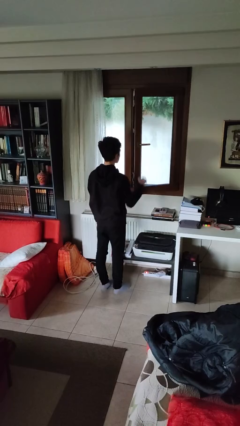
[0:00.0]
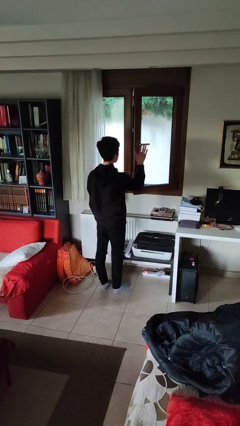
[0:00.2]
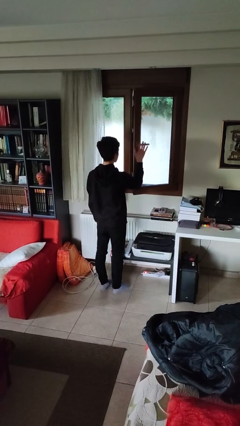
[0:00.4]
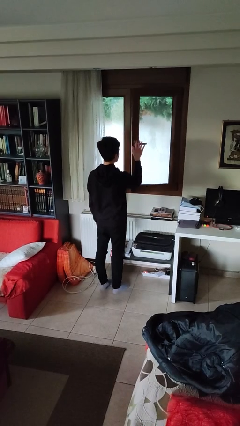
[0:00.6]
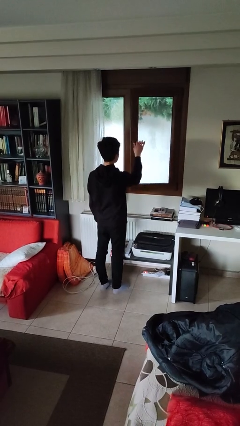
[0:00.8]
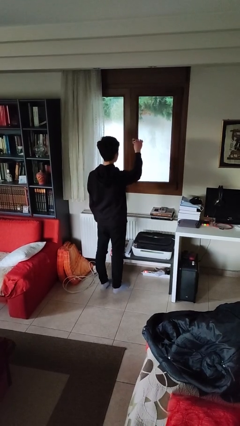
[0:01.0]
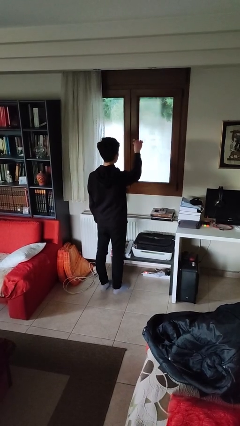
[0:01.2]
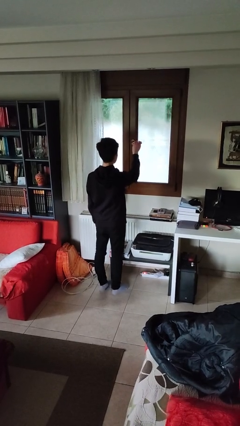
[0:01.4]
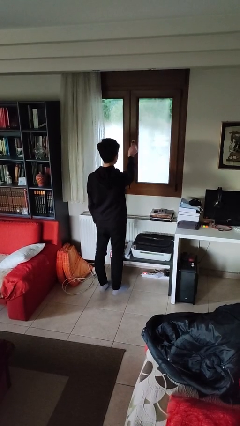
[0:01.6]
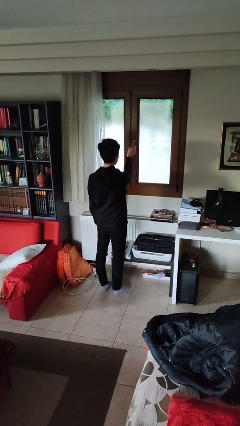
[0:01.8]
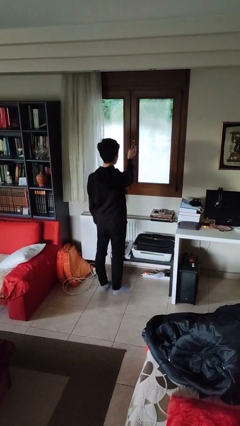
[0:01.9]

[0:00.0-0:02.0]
person closes home window

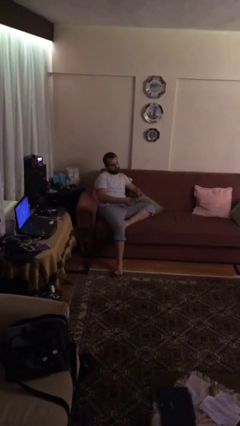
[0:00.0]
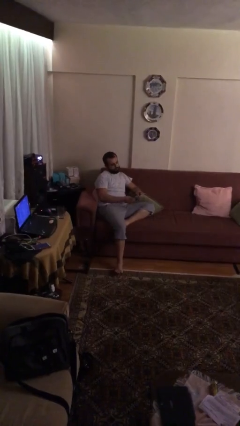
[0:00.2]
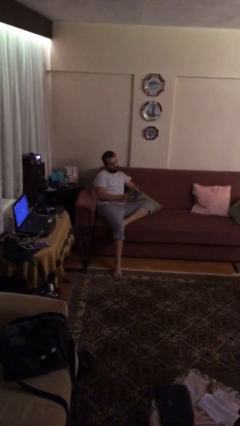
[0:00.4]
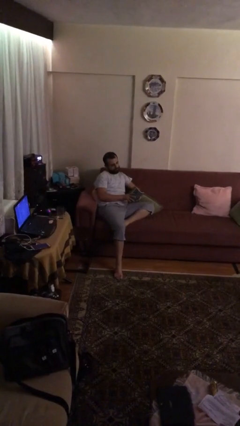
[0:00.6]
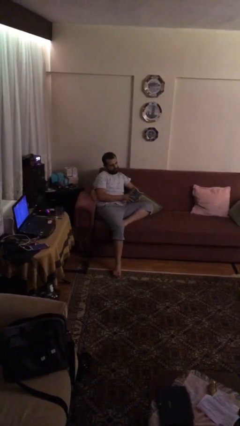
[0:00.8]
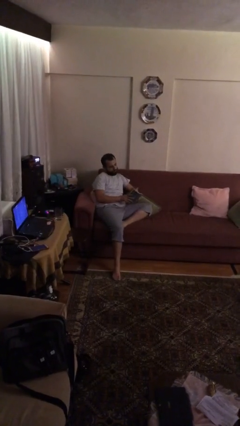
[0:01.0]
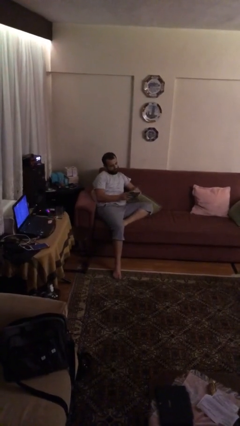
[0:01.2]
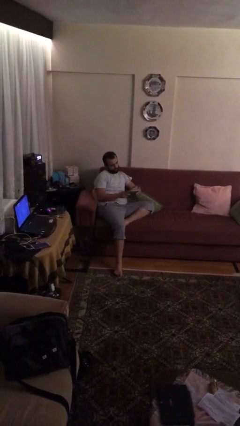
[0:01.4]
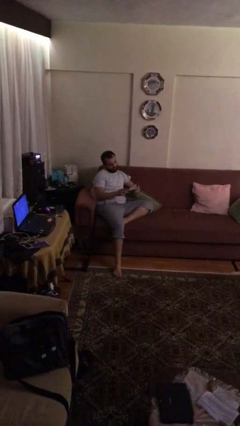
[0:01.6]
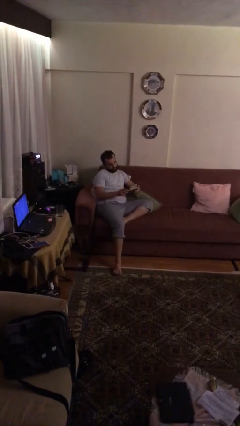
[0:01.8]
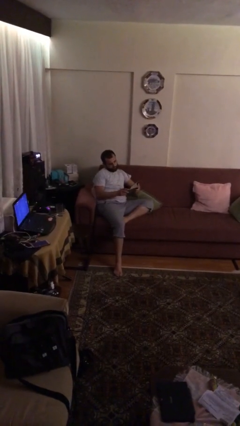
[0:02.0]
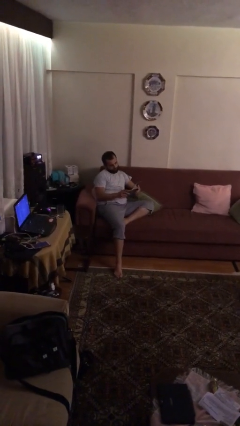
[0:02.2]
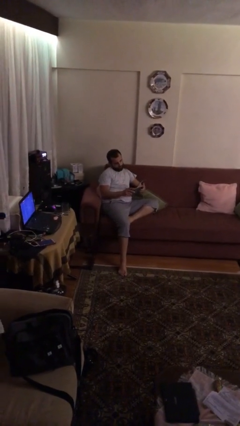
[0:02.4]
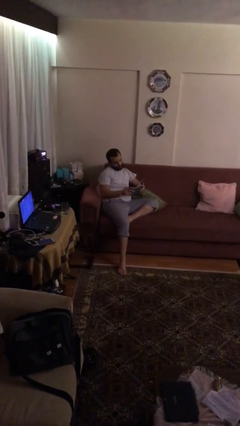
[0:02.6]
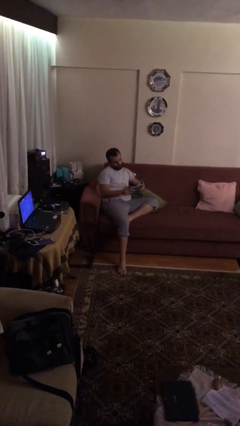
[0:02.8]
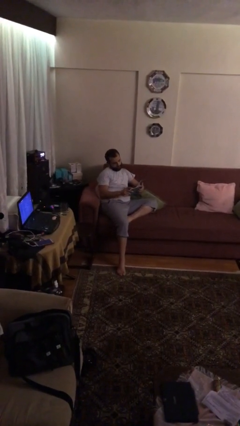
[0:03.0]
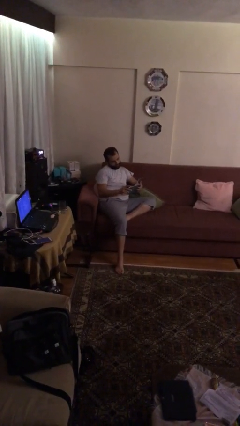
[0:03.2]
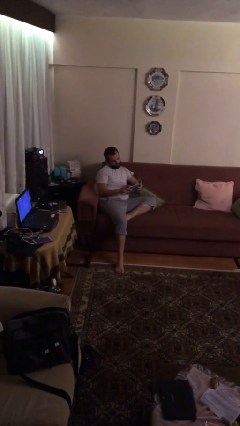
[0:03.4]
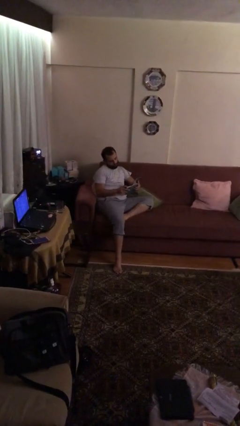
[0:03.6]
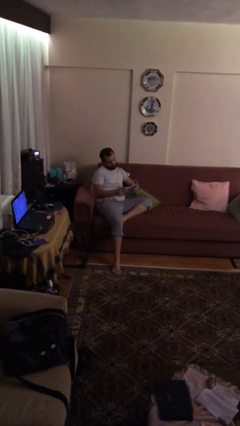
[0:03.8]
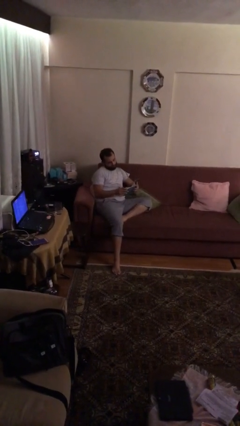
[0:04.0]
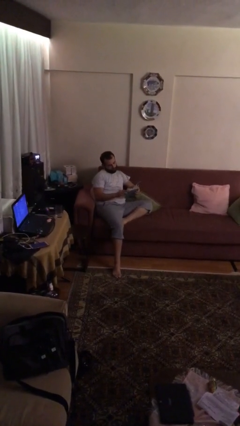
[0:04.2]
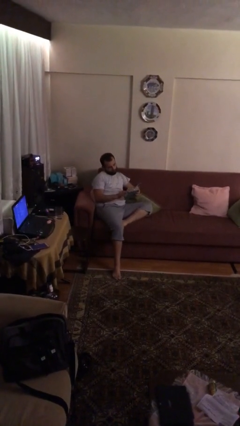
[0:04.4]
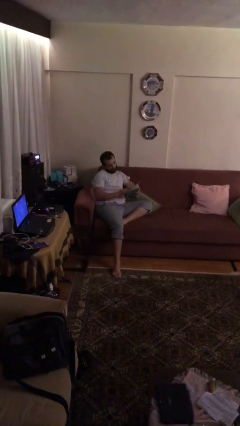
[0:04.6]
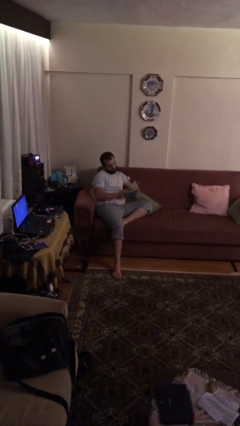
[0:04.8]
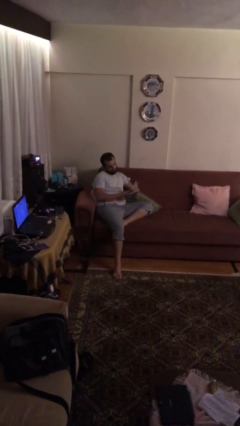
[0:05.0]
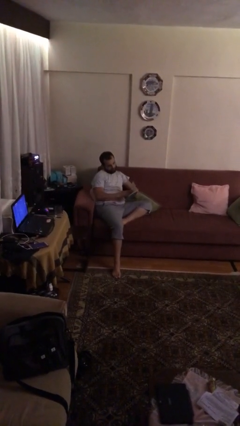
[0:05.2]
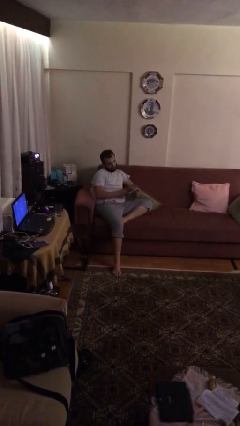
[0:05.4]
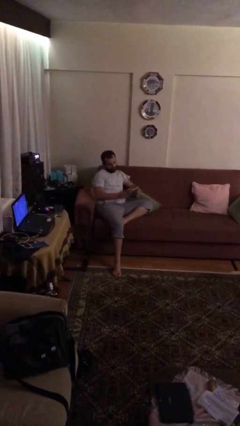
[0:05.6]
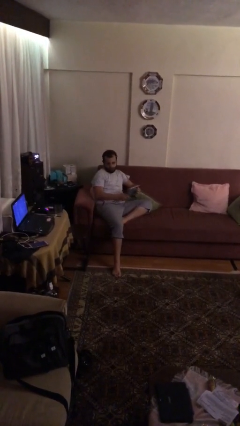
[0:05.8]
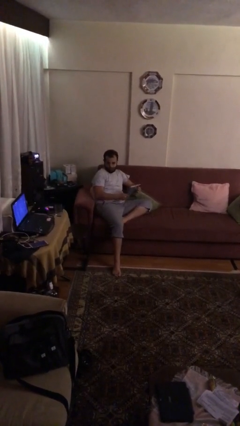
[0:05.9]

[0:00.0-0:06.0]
person reads document

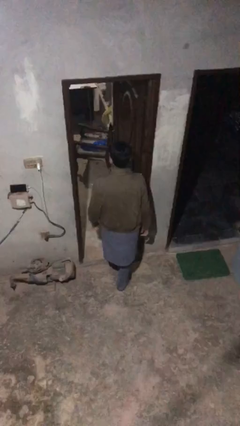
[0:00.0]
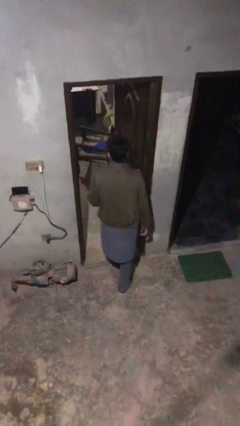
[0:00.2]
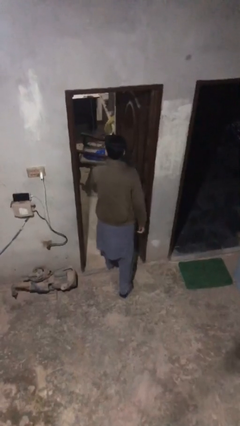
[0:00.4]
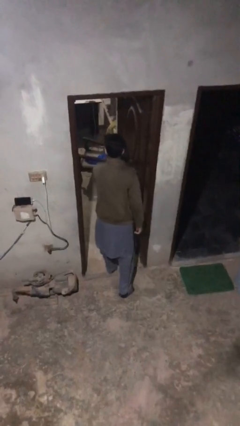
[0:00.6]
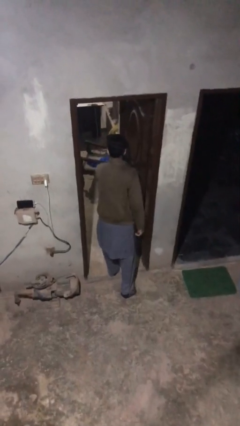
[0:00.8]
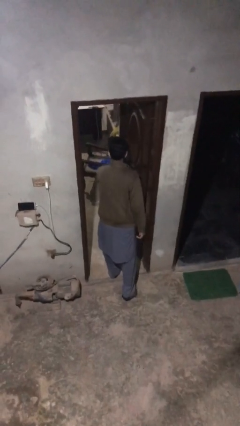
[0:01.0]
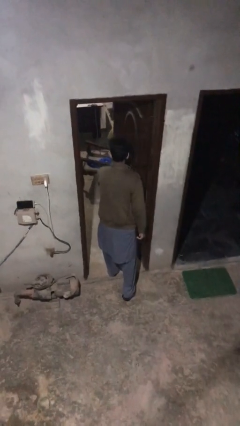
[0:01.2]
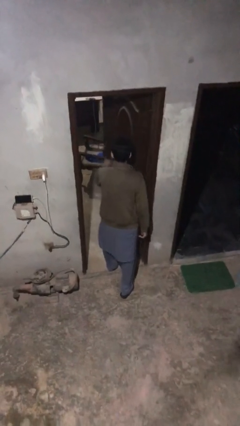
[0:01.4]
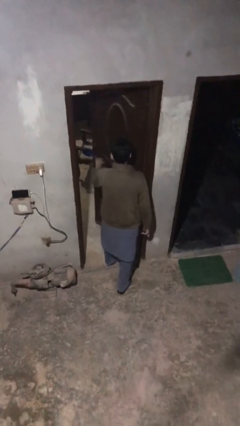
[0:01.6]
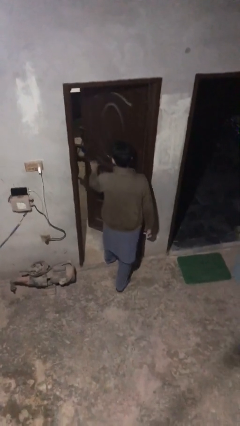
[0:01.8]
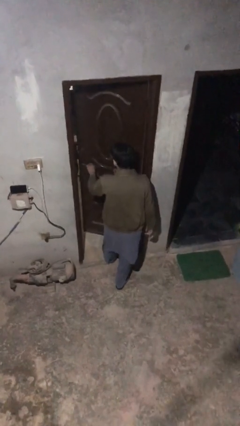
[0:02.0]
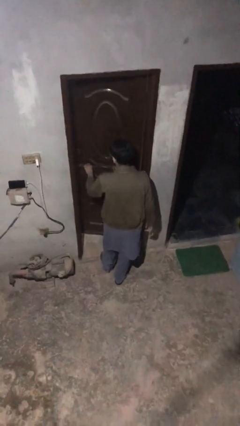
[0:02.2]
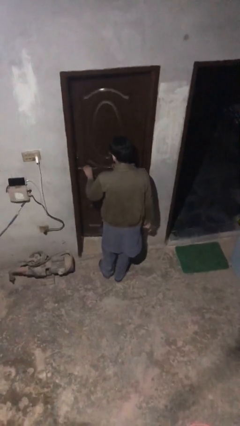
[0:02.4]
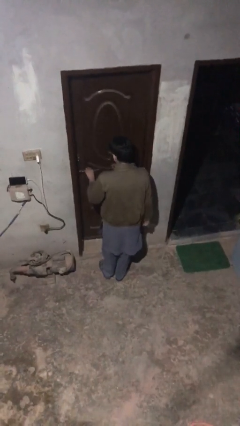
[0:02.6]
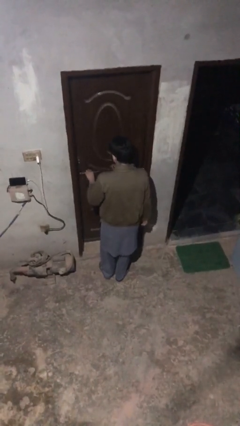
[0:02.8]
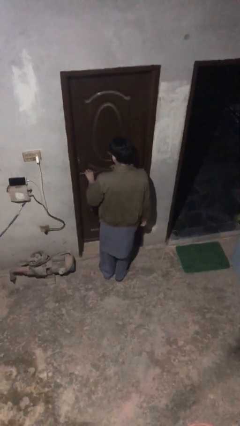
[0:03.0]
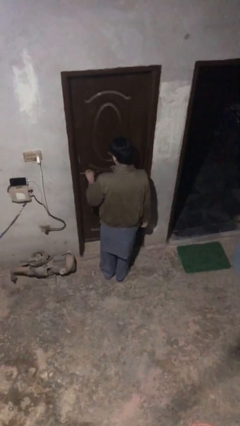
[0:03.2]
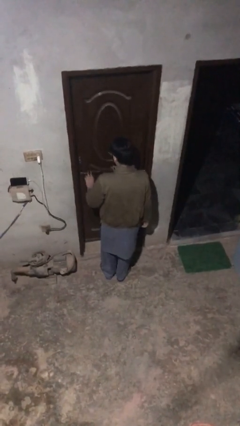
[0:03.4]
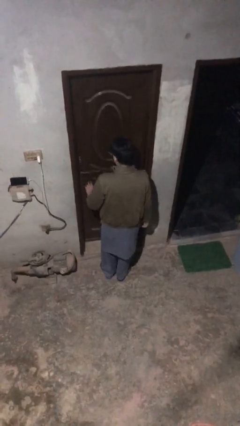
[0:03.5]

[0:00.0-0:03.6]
person closes facility door

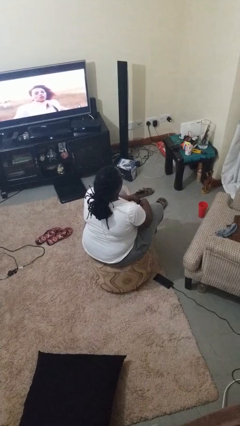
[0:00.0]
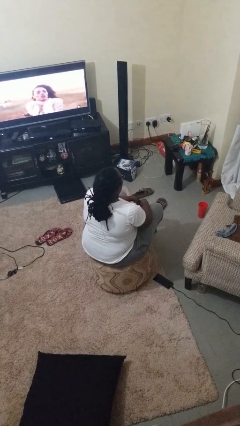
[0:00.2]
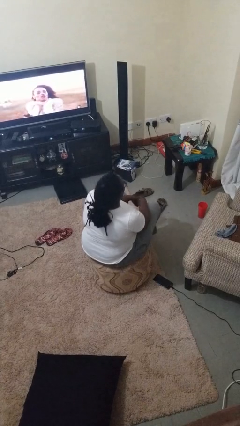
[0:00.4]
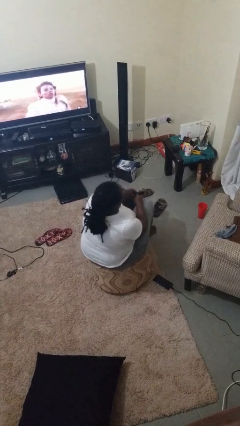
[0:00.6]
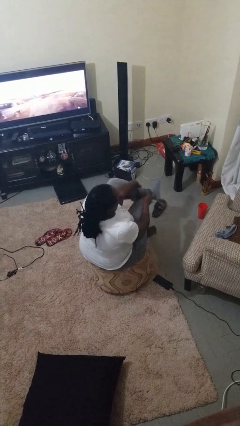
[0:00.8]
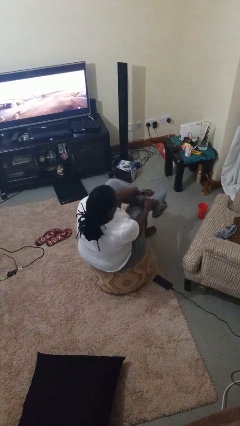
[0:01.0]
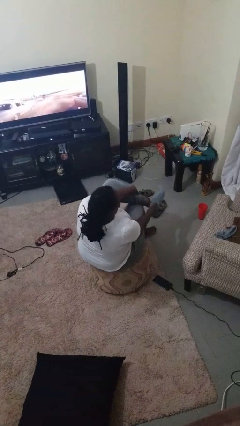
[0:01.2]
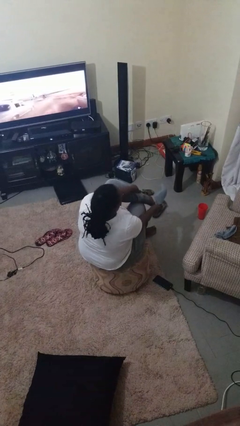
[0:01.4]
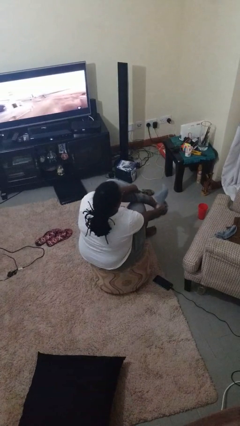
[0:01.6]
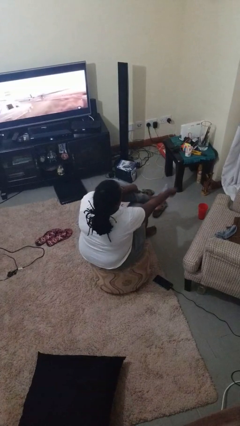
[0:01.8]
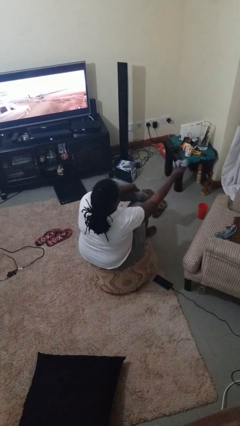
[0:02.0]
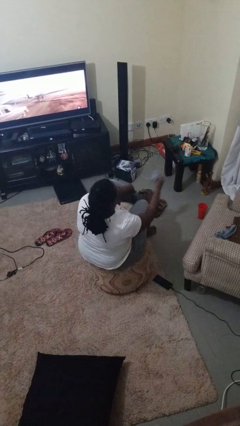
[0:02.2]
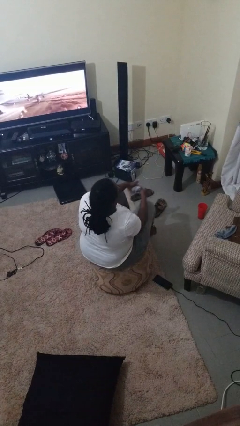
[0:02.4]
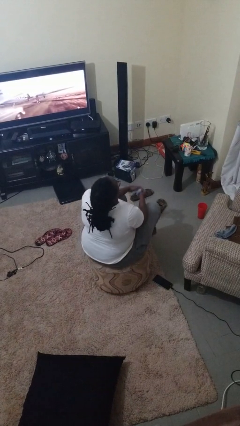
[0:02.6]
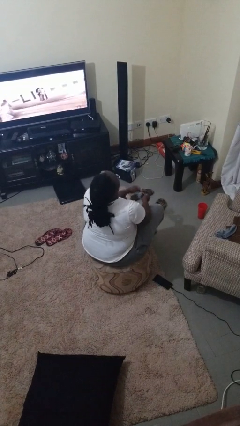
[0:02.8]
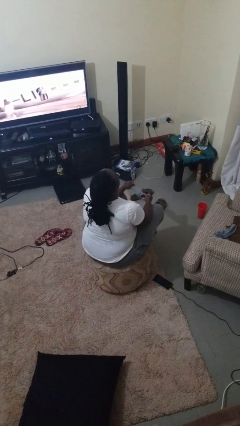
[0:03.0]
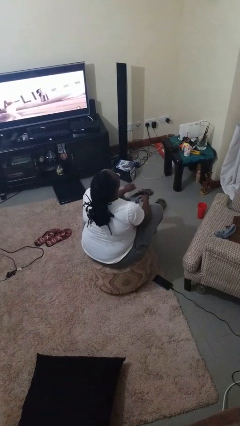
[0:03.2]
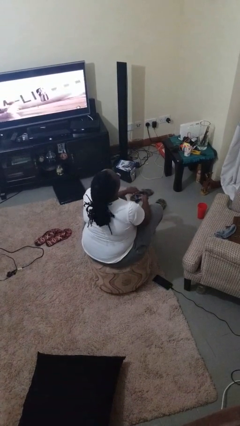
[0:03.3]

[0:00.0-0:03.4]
person takes off socks

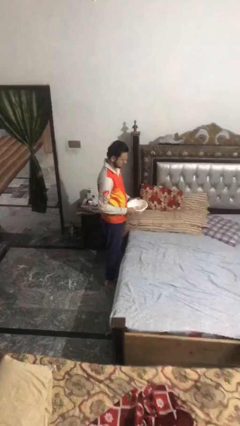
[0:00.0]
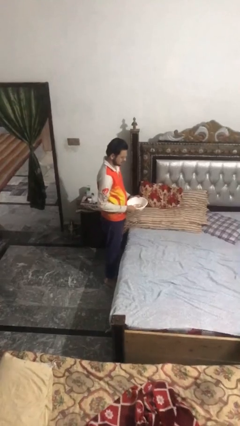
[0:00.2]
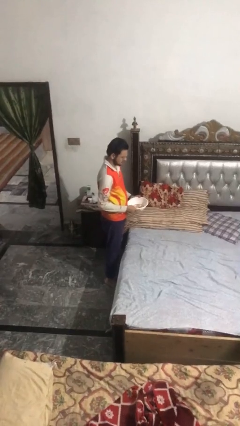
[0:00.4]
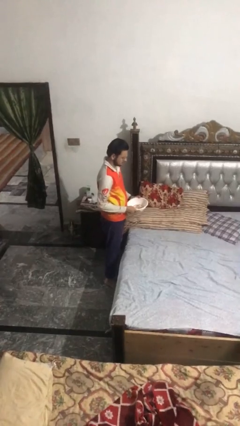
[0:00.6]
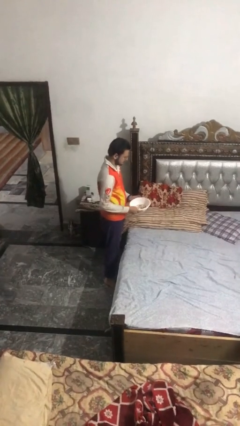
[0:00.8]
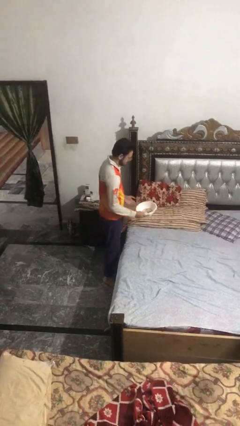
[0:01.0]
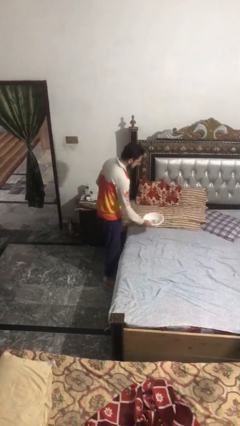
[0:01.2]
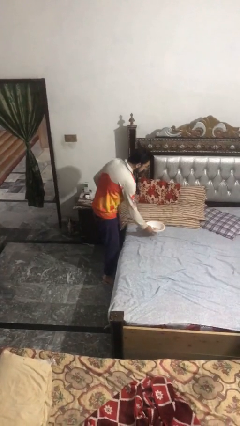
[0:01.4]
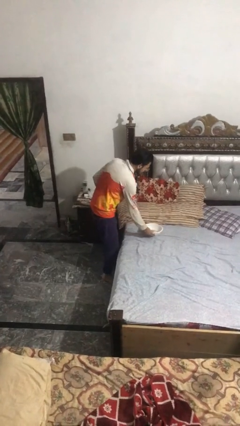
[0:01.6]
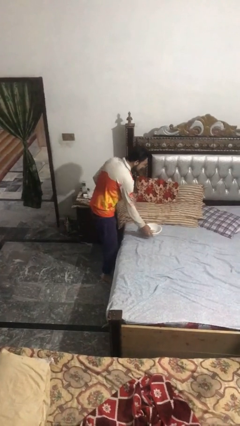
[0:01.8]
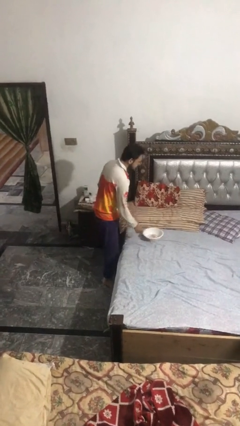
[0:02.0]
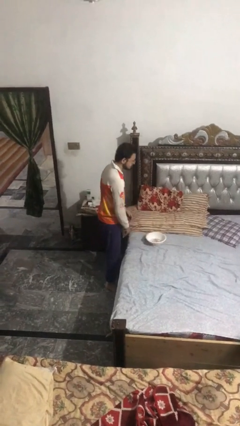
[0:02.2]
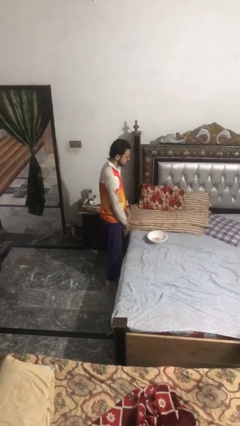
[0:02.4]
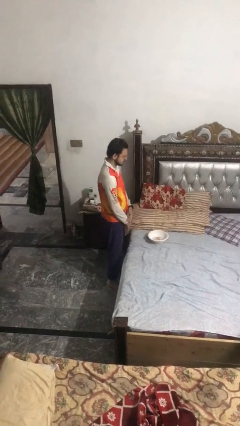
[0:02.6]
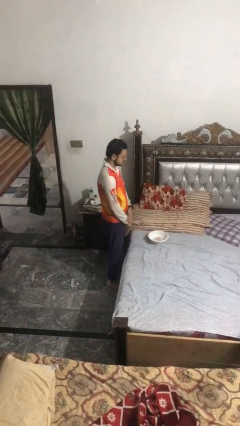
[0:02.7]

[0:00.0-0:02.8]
person puts down object on countertop
